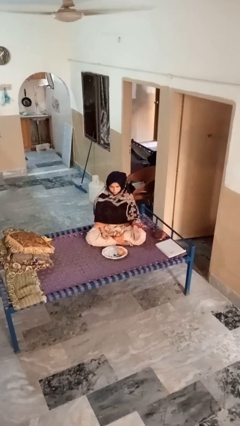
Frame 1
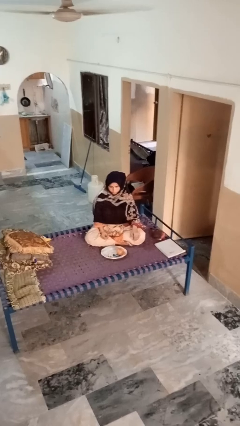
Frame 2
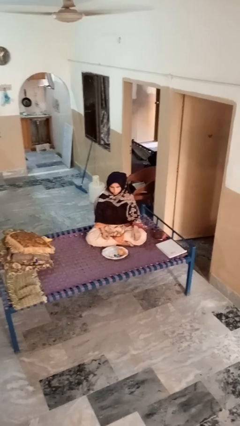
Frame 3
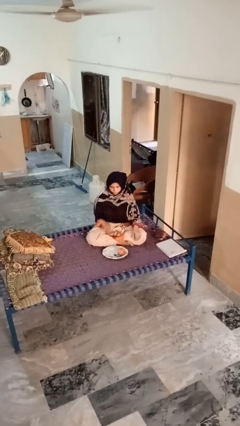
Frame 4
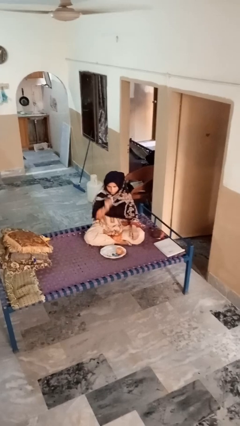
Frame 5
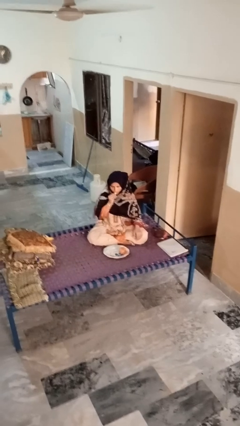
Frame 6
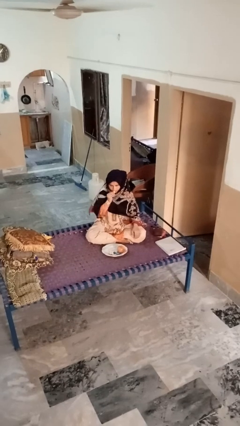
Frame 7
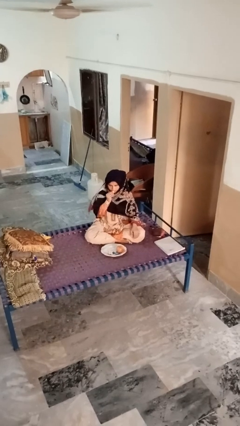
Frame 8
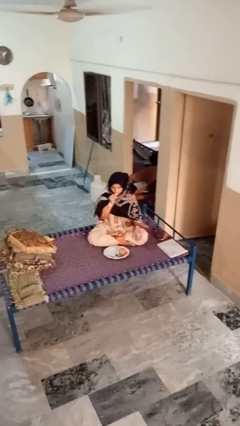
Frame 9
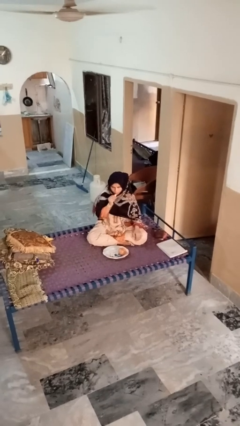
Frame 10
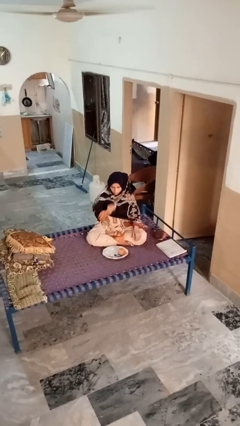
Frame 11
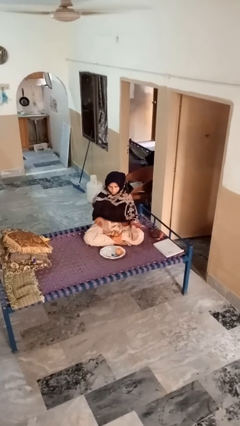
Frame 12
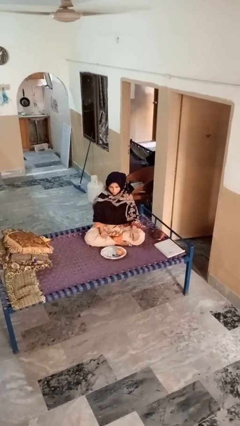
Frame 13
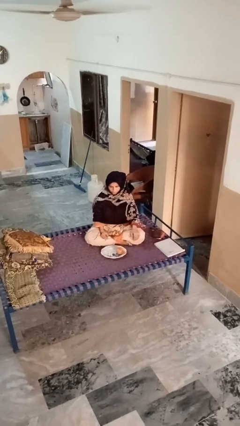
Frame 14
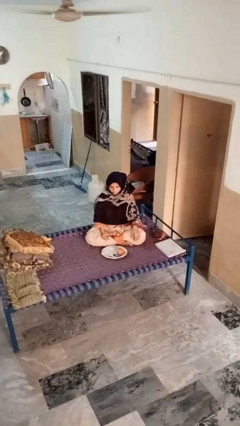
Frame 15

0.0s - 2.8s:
person eats apple

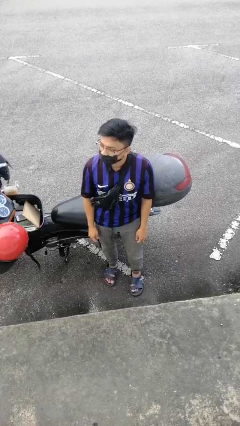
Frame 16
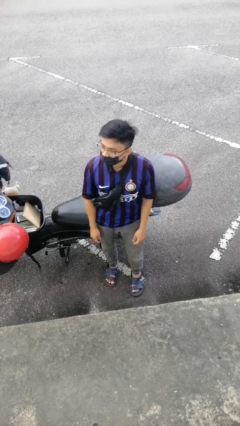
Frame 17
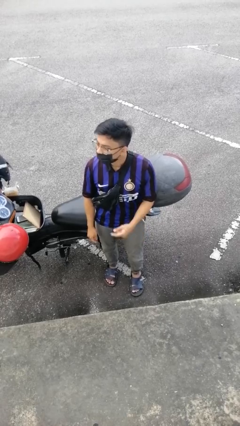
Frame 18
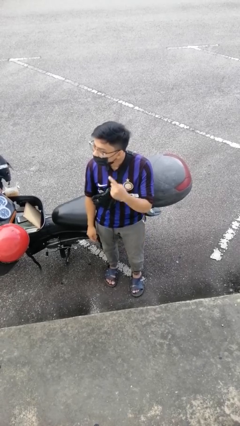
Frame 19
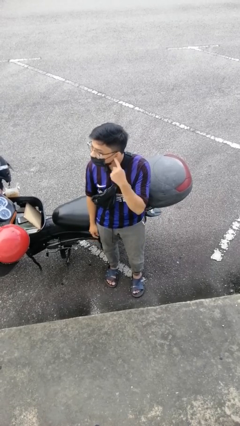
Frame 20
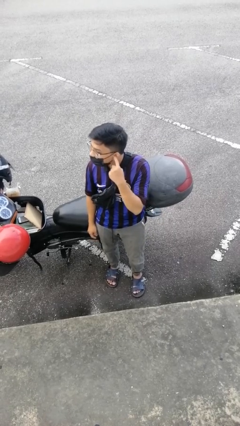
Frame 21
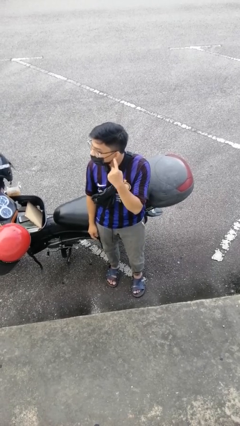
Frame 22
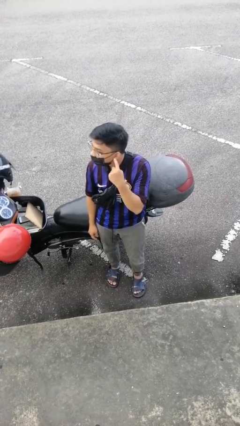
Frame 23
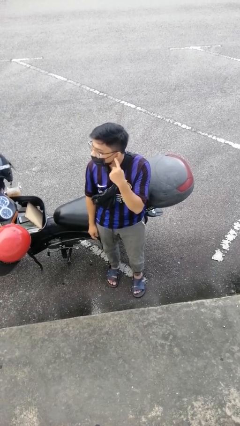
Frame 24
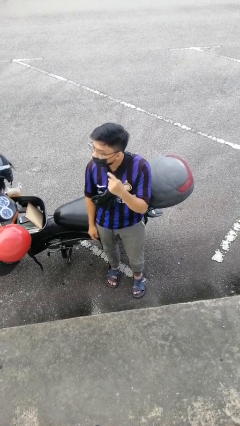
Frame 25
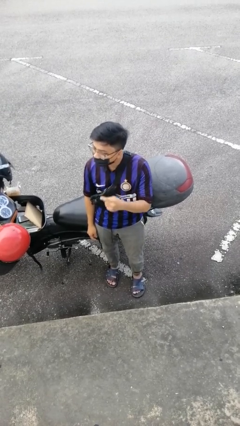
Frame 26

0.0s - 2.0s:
person gestures listen closely

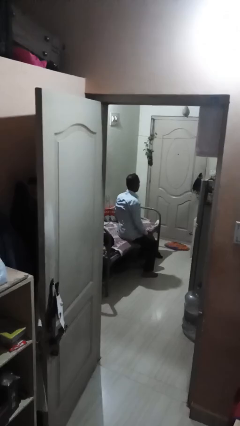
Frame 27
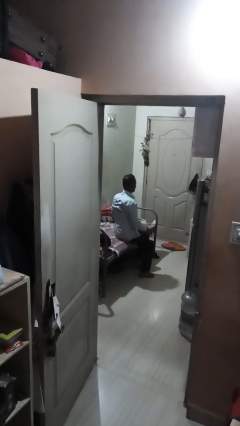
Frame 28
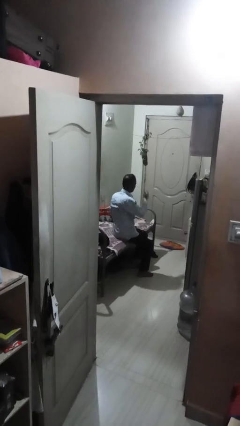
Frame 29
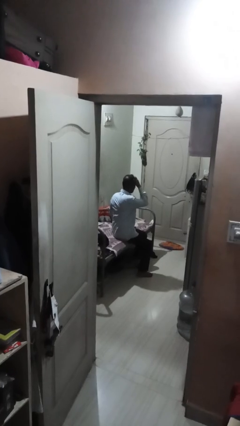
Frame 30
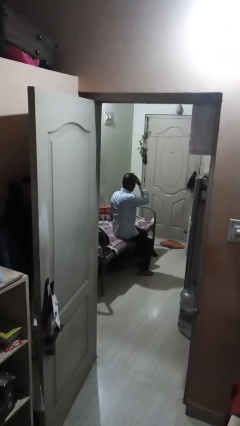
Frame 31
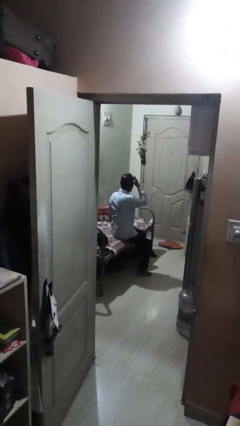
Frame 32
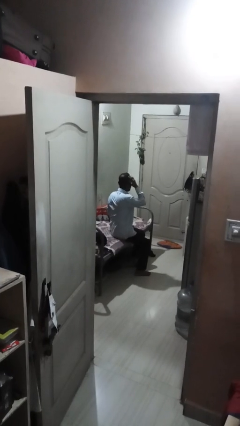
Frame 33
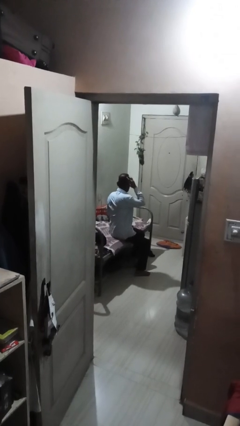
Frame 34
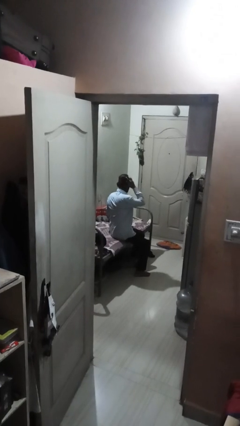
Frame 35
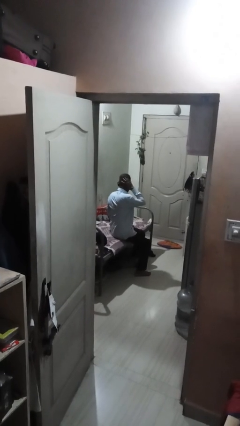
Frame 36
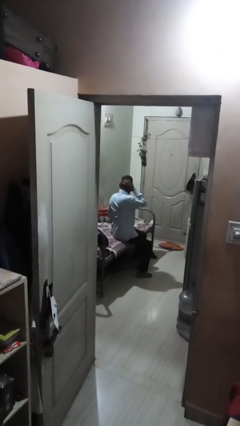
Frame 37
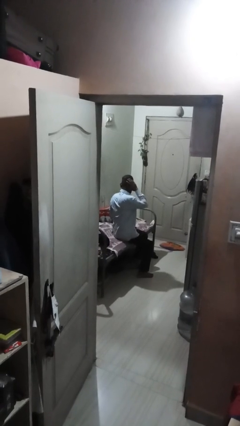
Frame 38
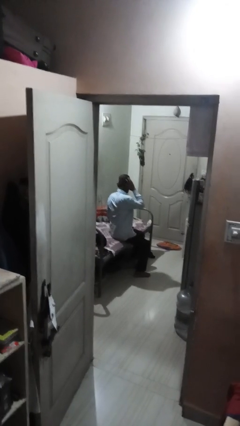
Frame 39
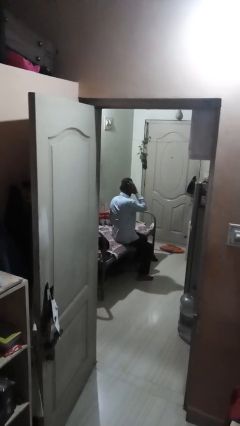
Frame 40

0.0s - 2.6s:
person strokes hair

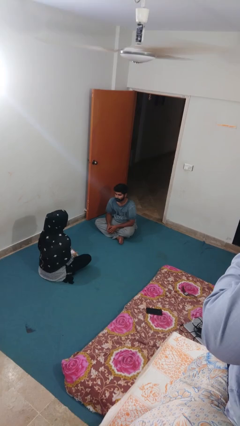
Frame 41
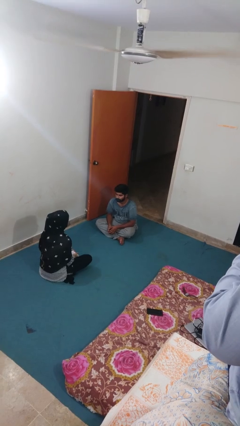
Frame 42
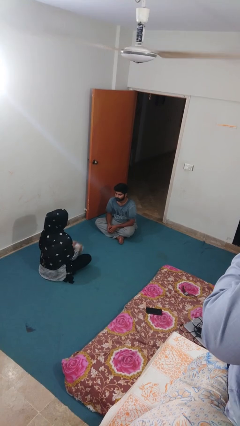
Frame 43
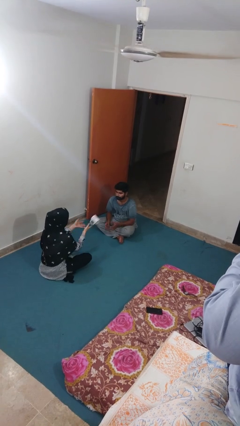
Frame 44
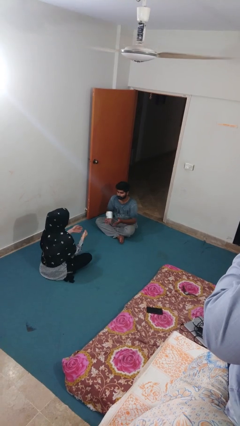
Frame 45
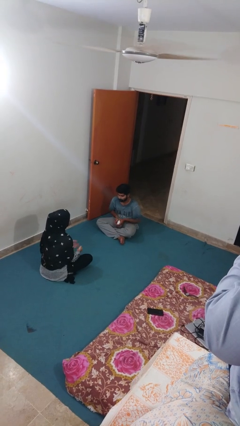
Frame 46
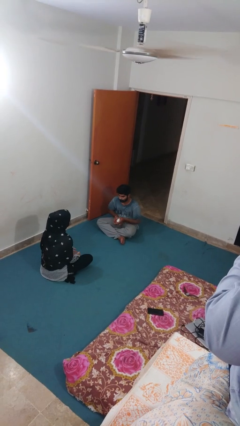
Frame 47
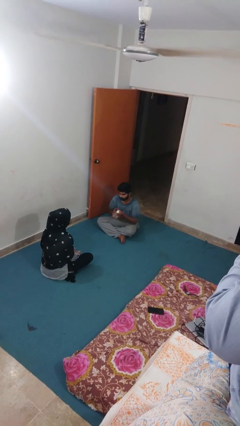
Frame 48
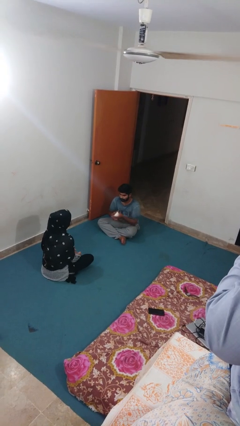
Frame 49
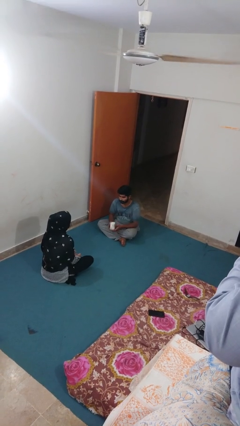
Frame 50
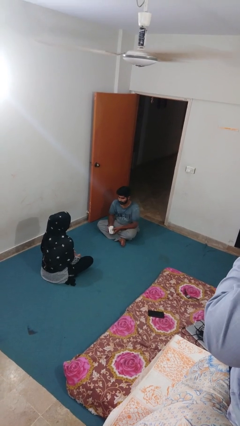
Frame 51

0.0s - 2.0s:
person catches object from person

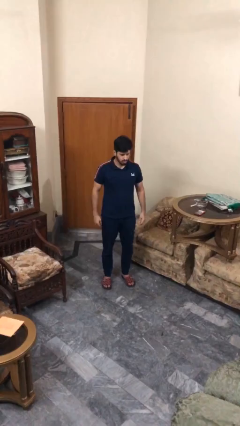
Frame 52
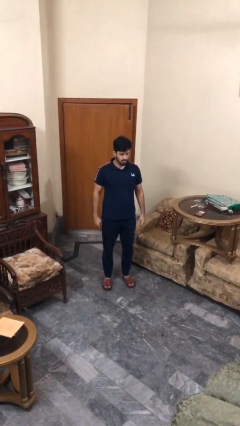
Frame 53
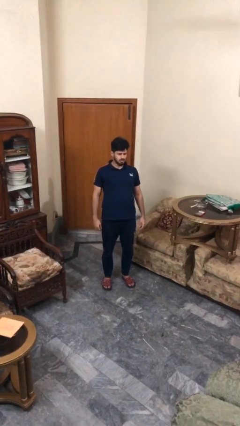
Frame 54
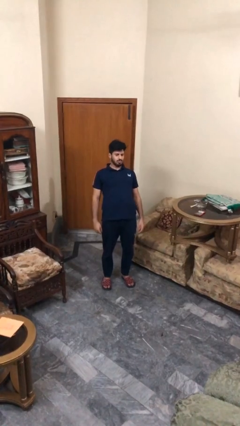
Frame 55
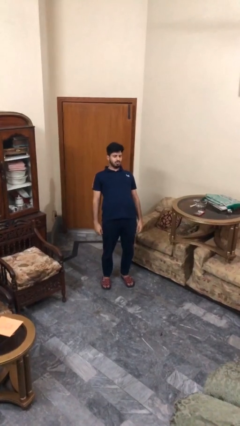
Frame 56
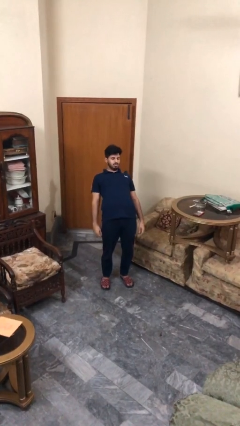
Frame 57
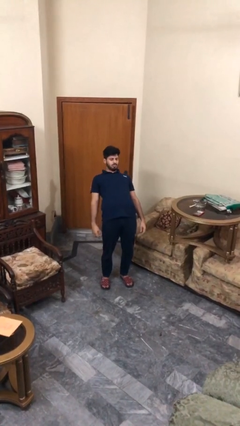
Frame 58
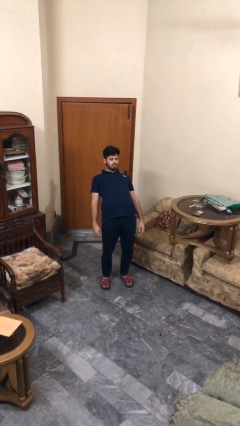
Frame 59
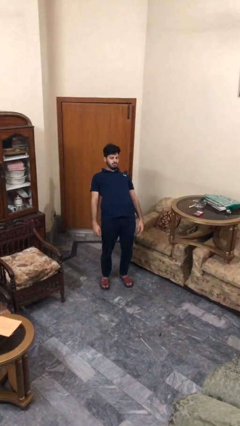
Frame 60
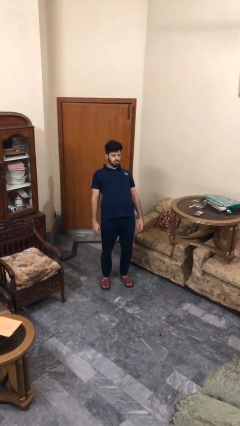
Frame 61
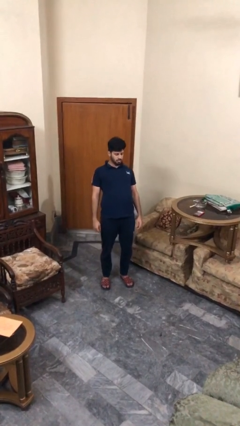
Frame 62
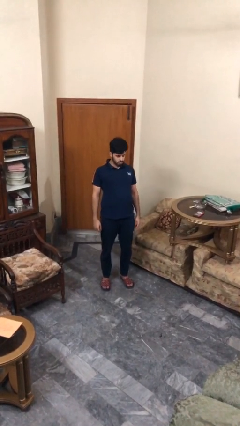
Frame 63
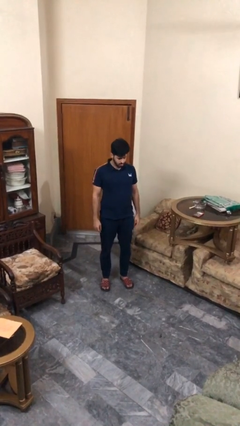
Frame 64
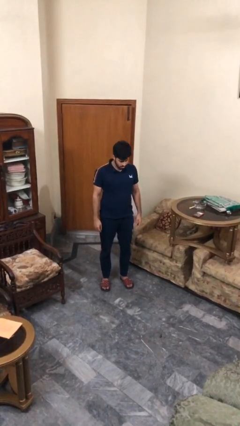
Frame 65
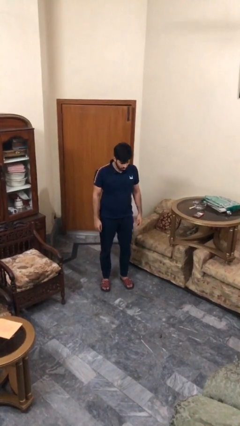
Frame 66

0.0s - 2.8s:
person stretches back

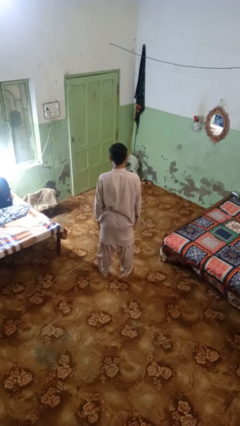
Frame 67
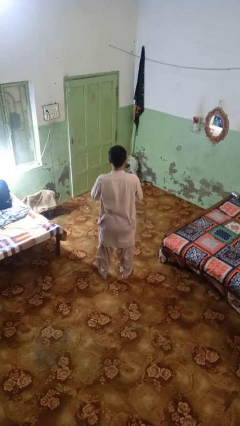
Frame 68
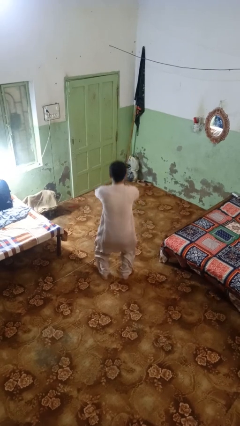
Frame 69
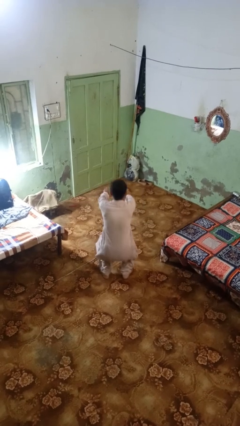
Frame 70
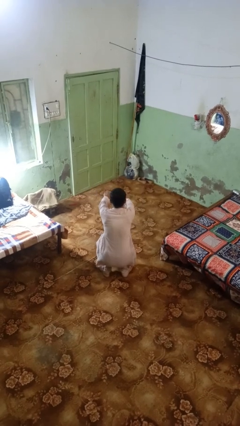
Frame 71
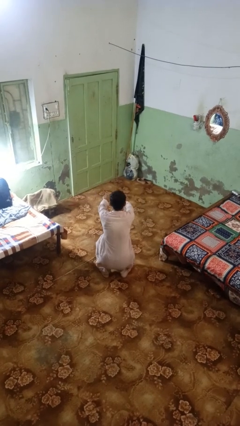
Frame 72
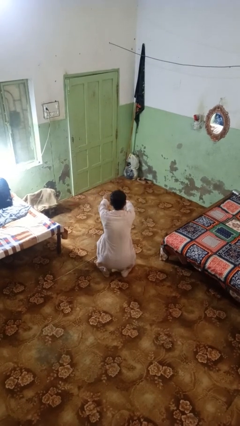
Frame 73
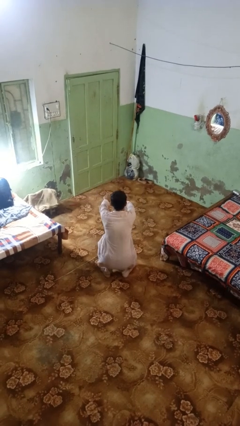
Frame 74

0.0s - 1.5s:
person squats

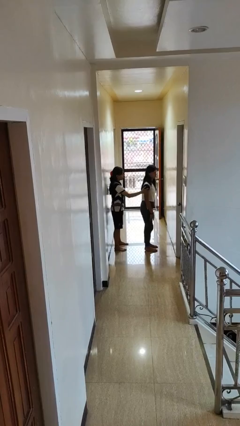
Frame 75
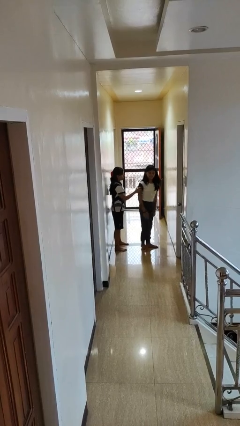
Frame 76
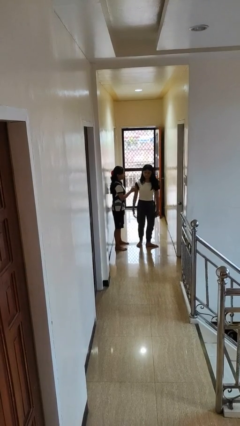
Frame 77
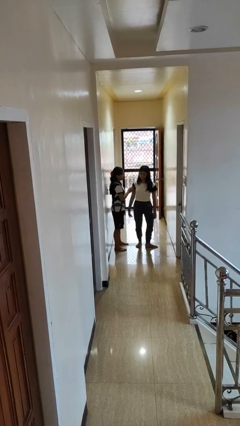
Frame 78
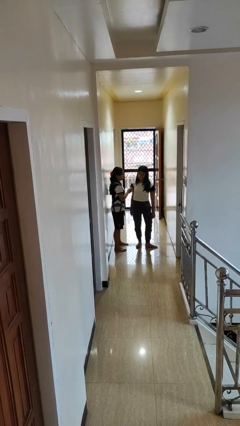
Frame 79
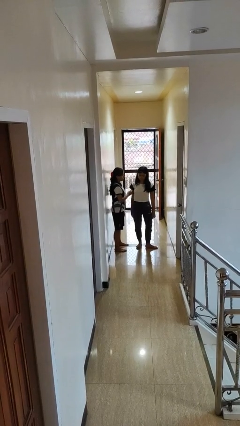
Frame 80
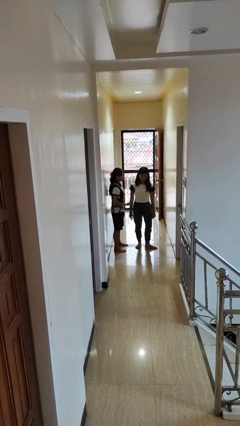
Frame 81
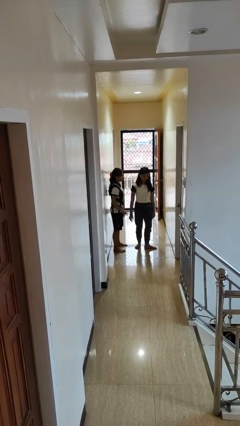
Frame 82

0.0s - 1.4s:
person spins person around

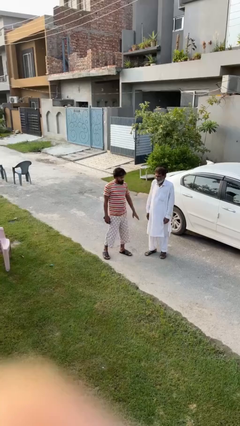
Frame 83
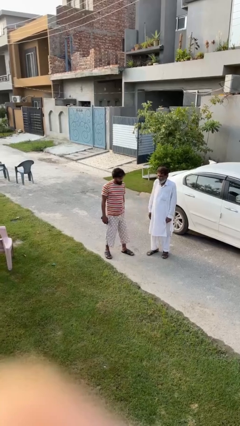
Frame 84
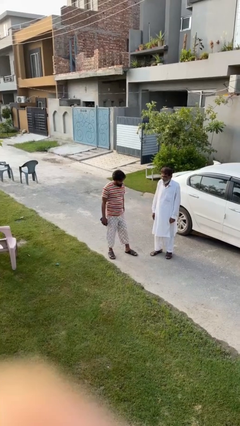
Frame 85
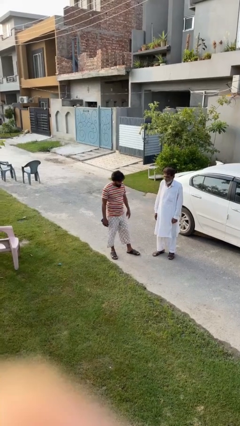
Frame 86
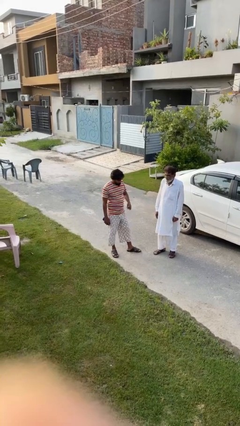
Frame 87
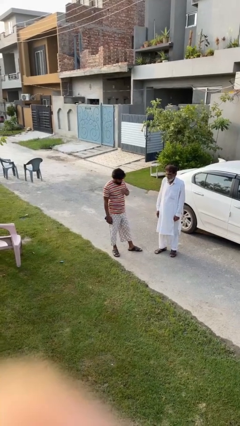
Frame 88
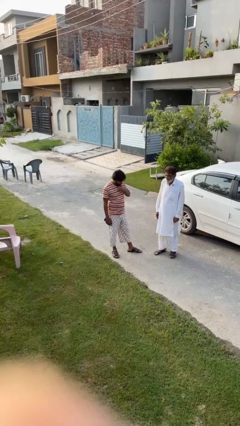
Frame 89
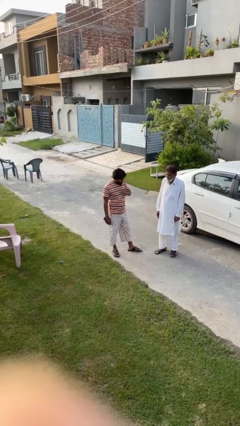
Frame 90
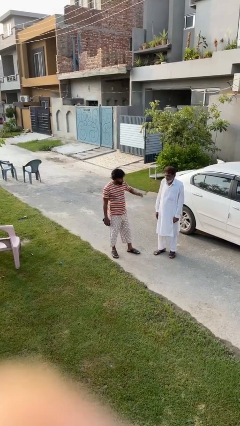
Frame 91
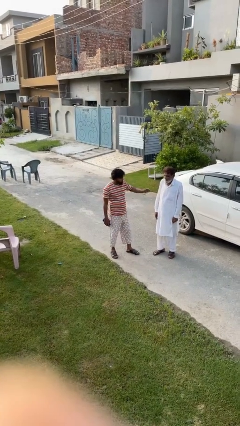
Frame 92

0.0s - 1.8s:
person touches face of person
